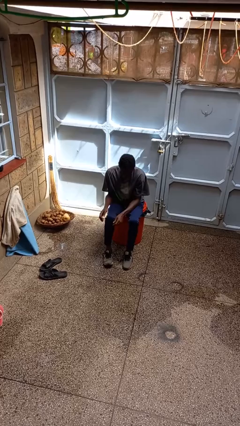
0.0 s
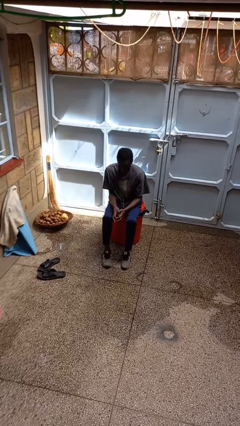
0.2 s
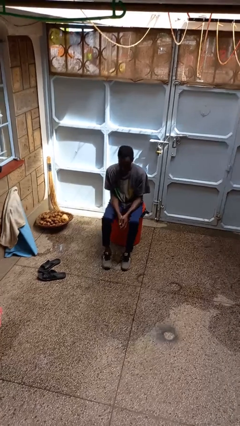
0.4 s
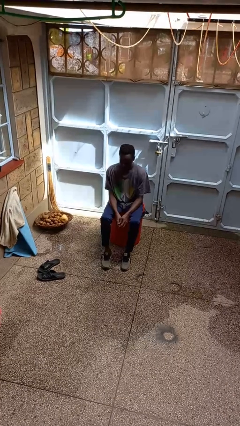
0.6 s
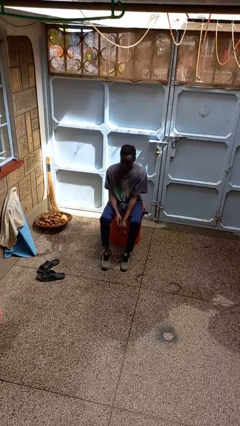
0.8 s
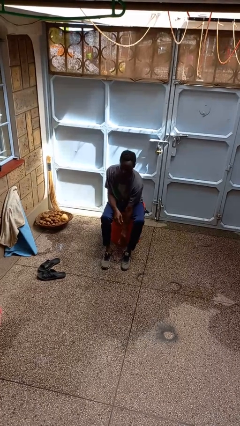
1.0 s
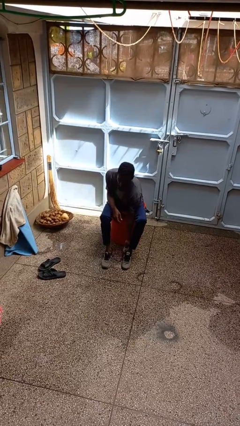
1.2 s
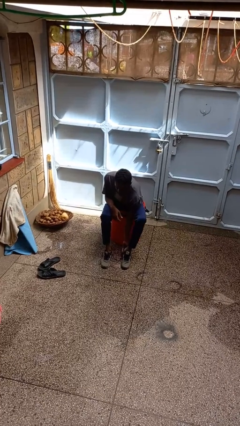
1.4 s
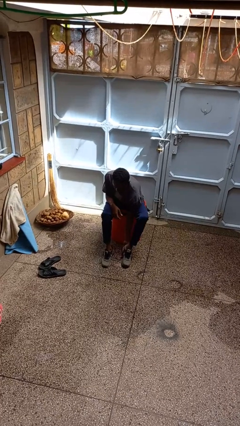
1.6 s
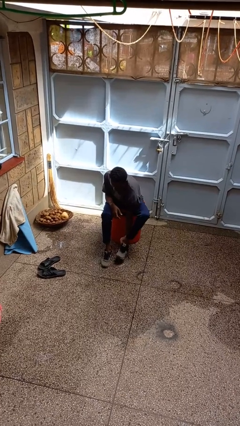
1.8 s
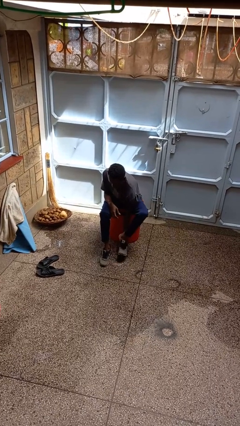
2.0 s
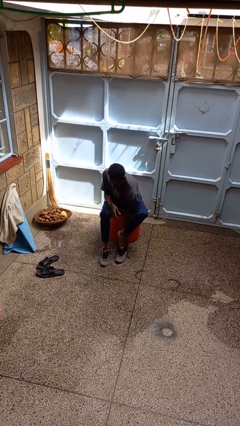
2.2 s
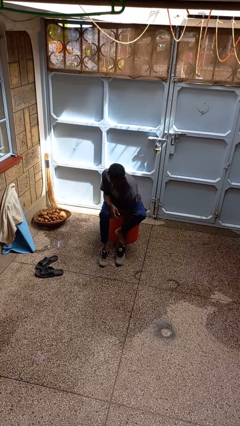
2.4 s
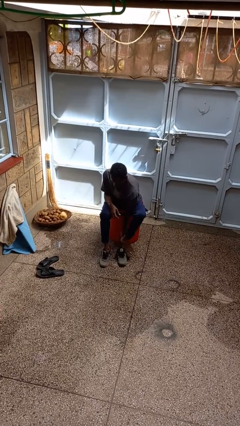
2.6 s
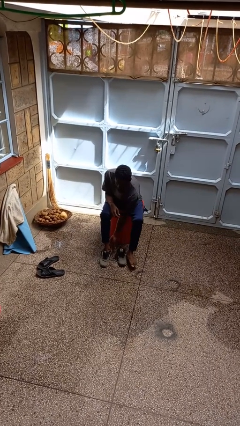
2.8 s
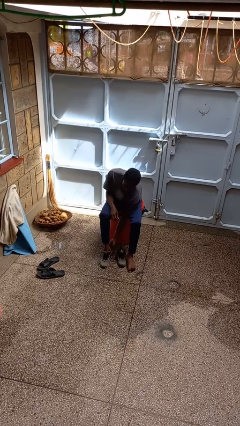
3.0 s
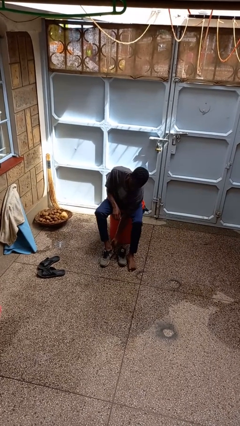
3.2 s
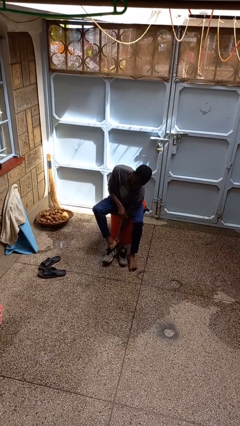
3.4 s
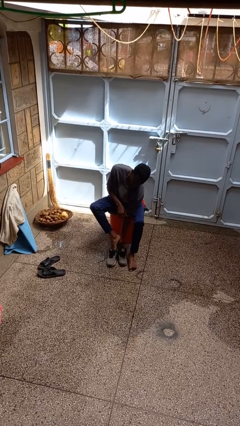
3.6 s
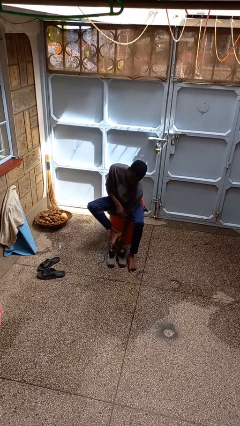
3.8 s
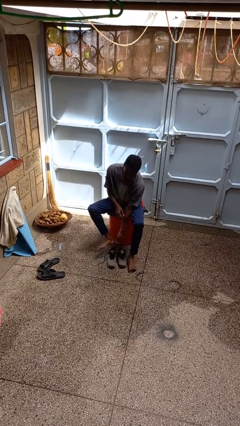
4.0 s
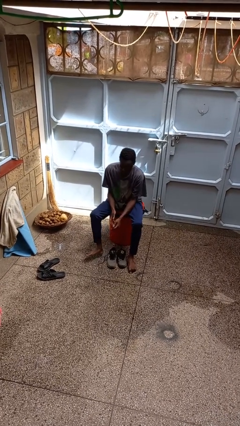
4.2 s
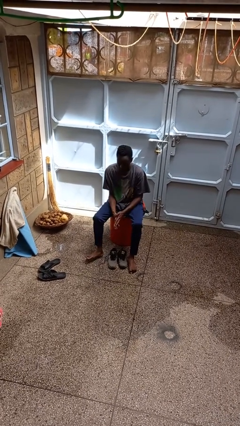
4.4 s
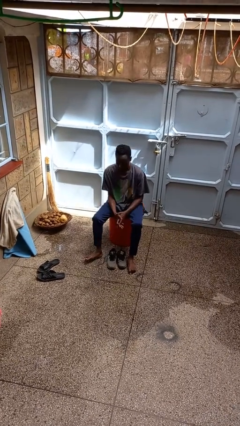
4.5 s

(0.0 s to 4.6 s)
person takes off shoes

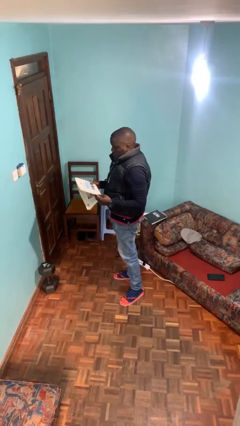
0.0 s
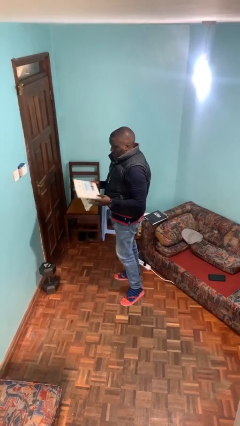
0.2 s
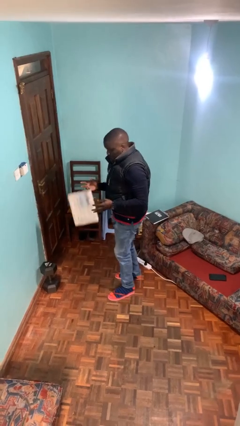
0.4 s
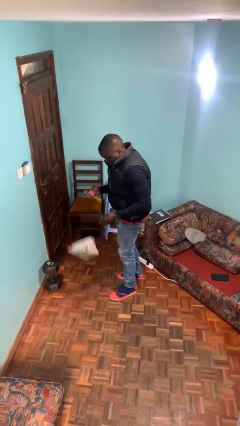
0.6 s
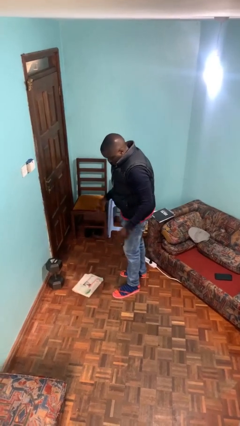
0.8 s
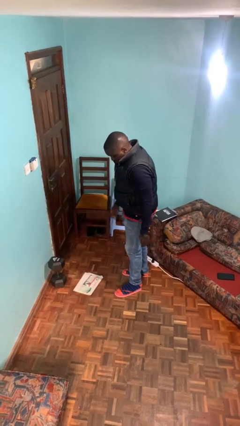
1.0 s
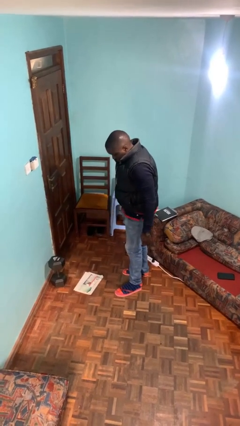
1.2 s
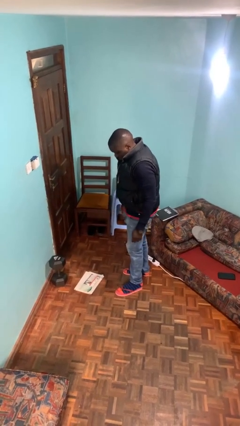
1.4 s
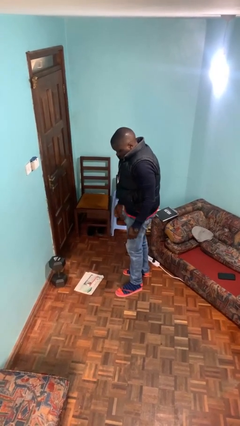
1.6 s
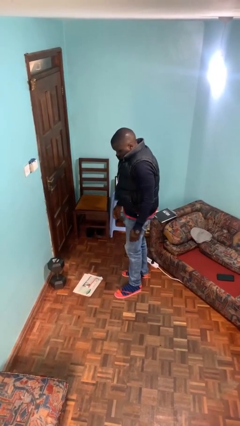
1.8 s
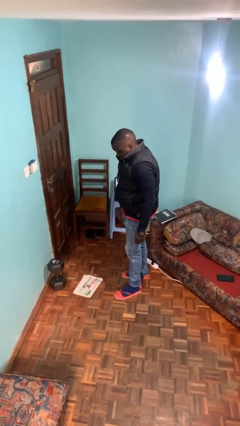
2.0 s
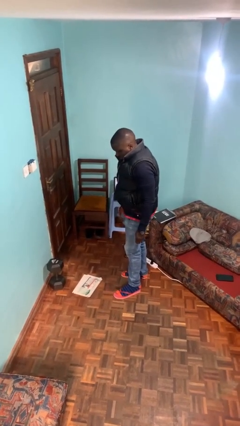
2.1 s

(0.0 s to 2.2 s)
person drops object

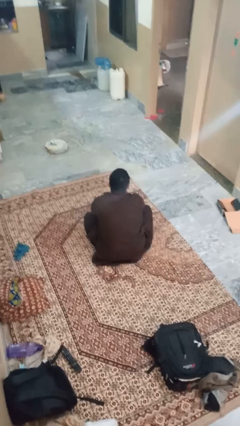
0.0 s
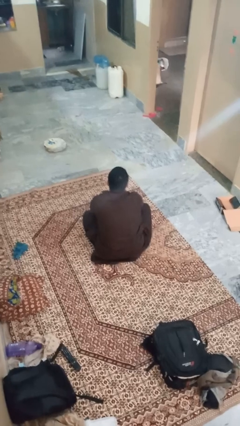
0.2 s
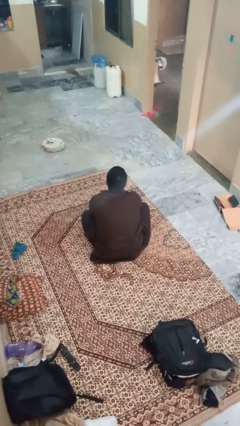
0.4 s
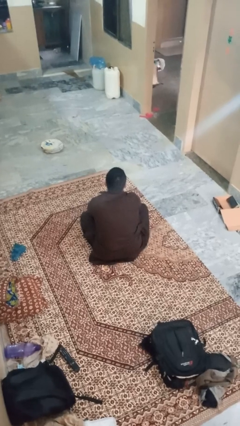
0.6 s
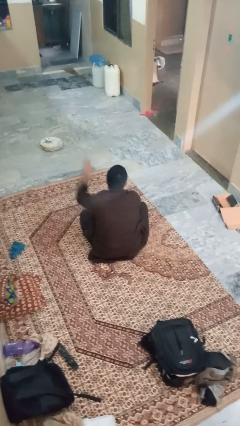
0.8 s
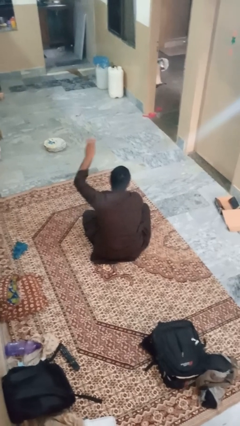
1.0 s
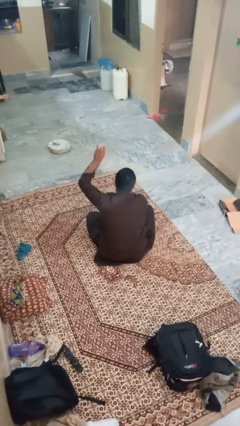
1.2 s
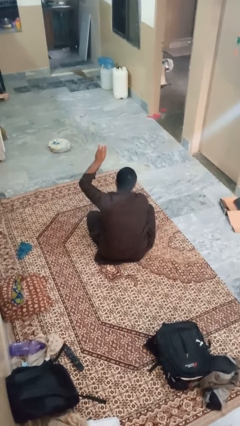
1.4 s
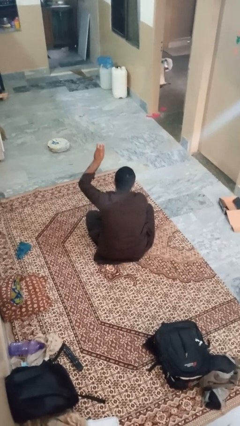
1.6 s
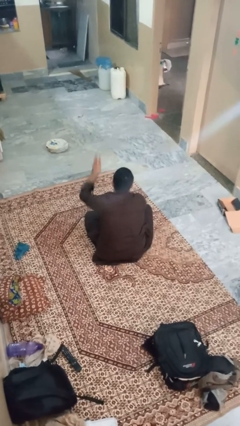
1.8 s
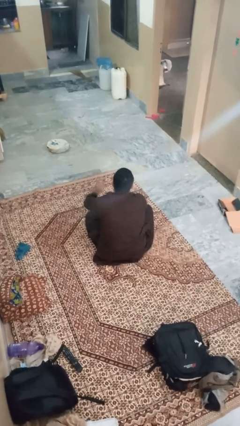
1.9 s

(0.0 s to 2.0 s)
person gestures number three

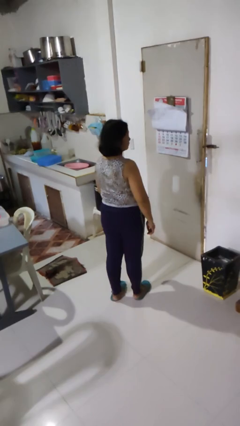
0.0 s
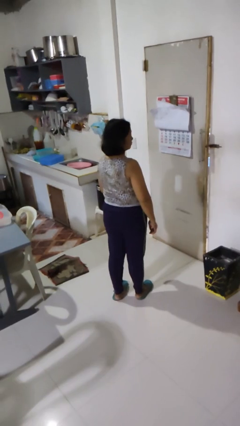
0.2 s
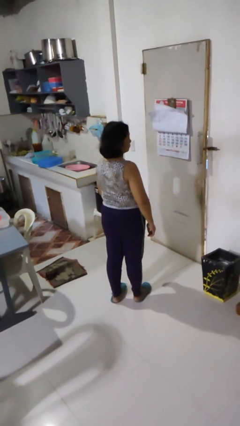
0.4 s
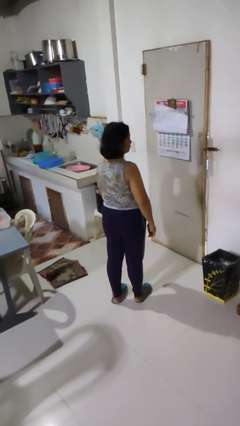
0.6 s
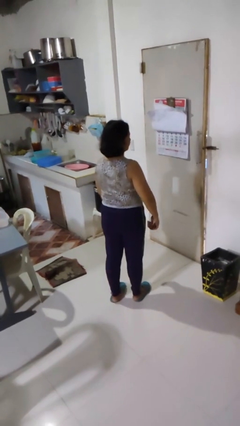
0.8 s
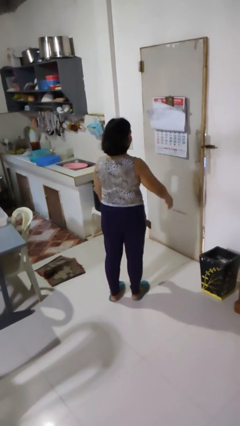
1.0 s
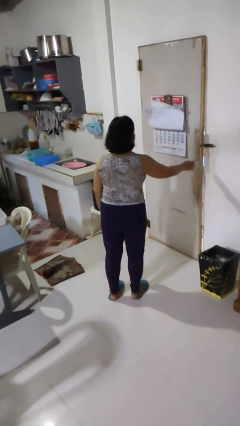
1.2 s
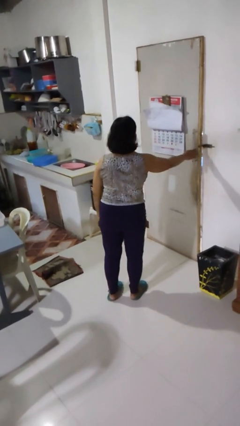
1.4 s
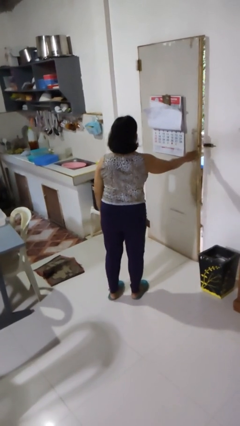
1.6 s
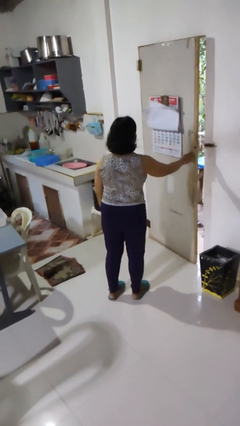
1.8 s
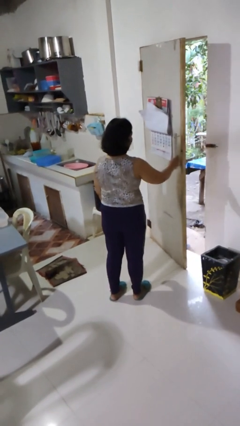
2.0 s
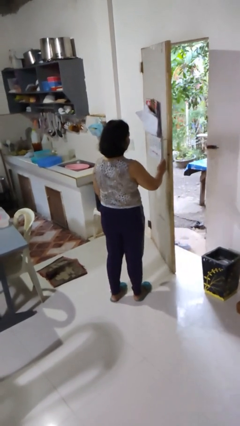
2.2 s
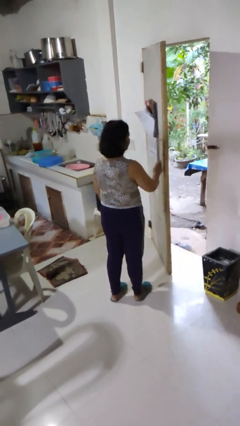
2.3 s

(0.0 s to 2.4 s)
person opens facility door

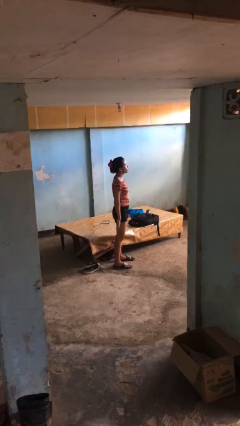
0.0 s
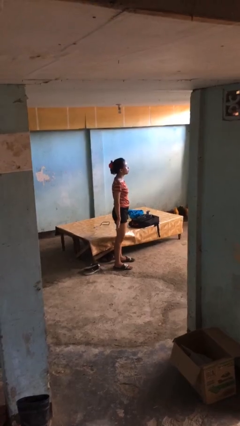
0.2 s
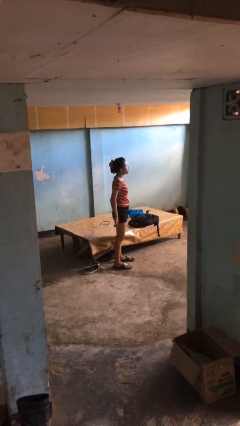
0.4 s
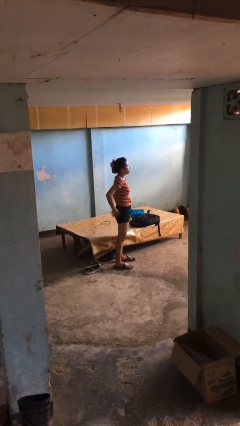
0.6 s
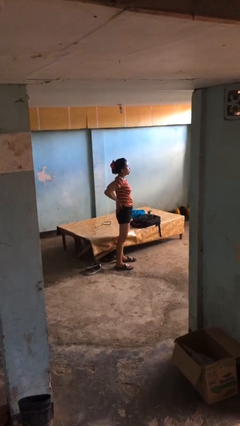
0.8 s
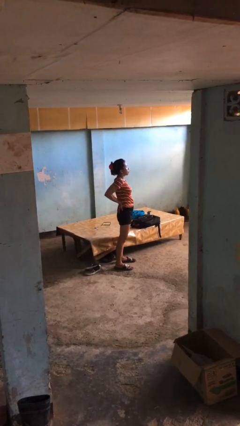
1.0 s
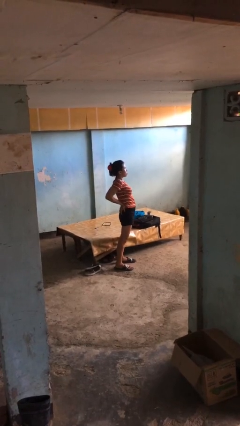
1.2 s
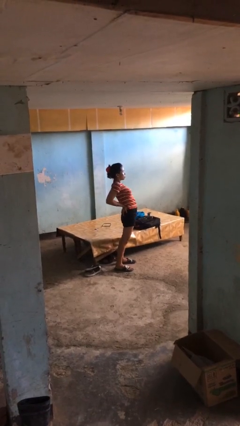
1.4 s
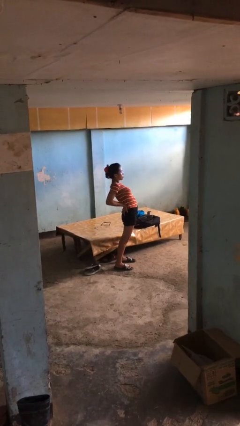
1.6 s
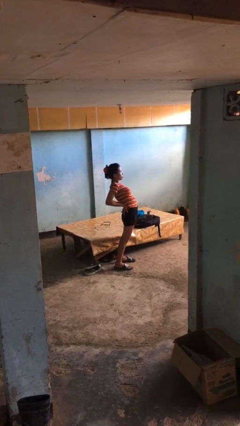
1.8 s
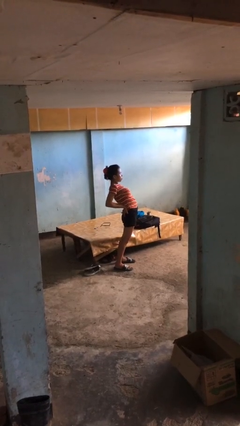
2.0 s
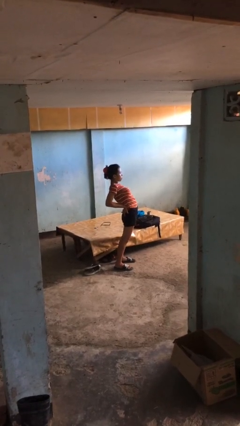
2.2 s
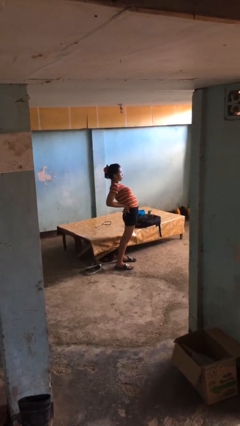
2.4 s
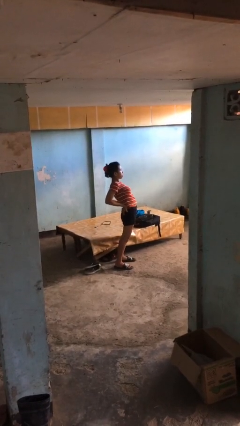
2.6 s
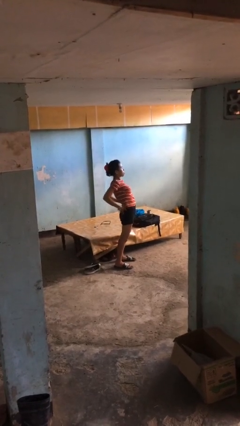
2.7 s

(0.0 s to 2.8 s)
person stretches back

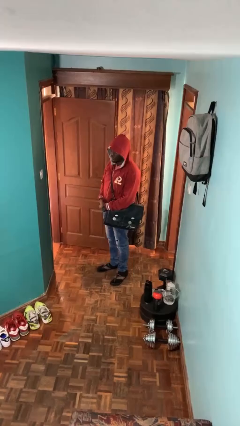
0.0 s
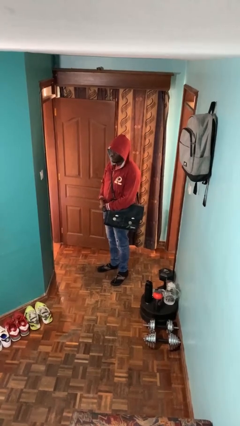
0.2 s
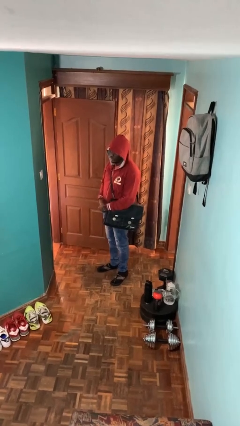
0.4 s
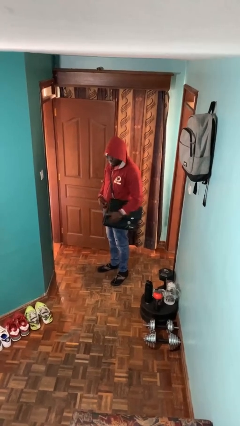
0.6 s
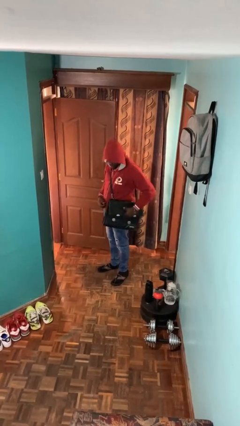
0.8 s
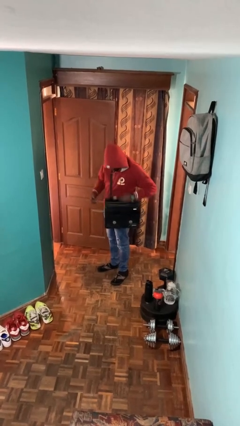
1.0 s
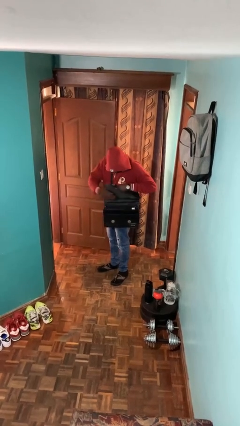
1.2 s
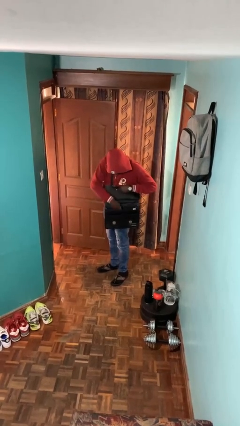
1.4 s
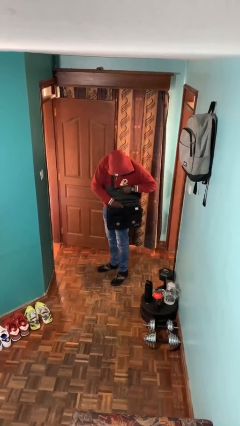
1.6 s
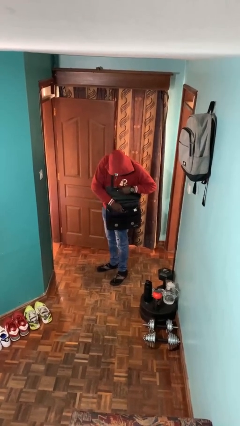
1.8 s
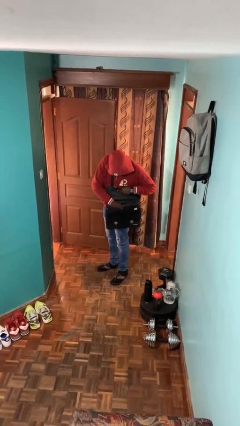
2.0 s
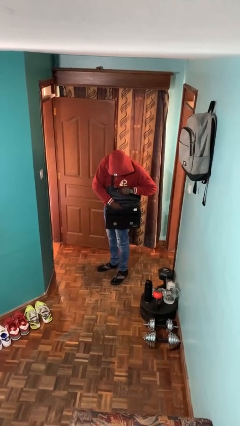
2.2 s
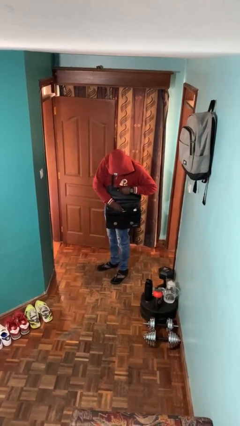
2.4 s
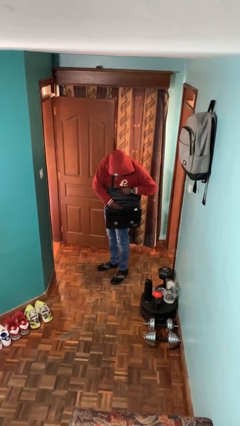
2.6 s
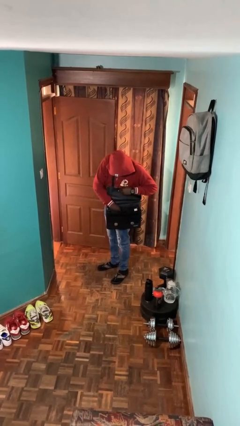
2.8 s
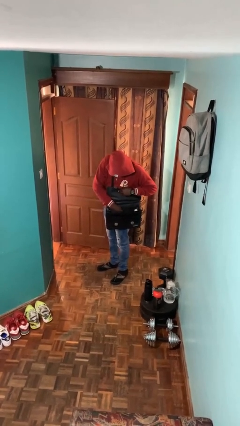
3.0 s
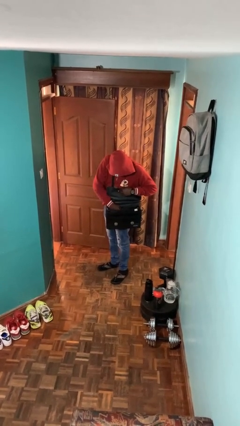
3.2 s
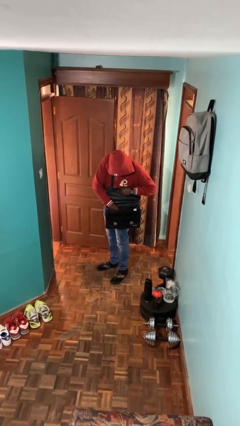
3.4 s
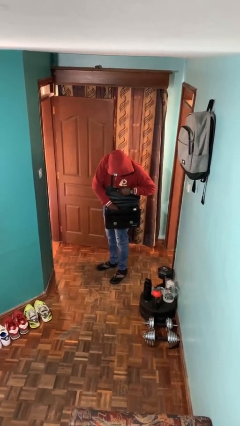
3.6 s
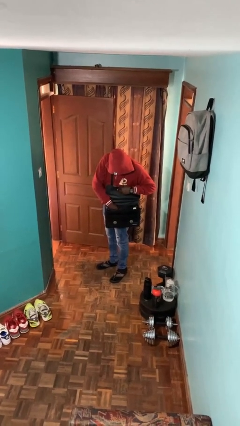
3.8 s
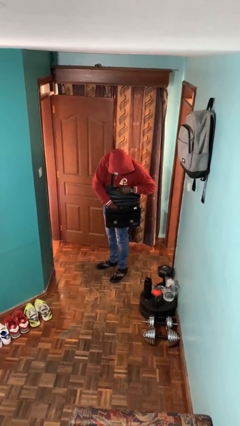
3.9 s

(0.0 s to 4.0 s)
person searches in purse
